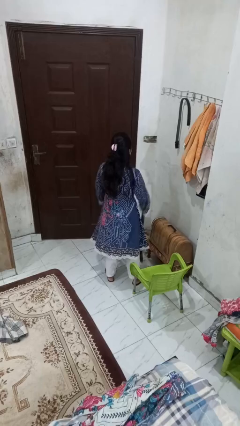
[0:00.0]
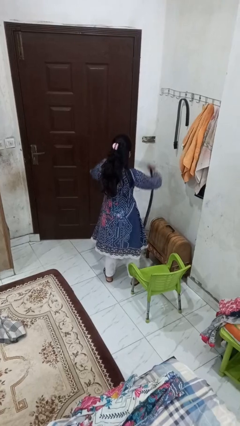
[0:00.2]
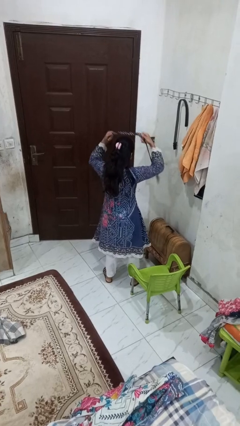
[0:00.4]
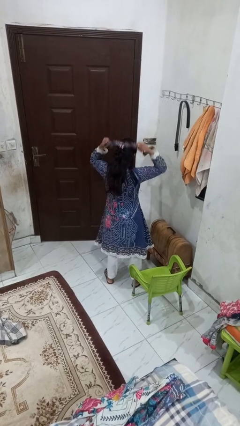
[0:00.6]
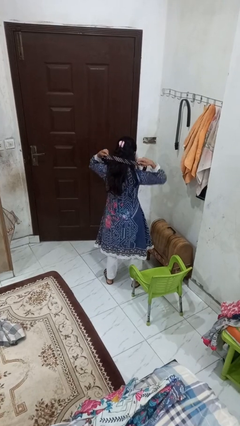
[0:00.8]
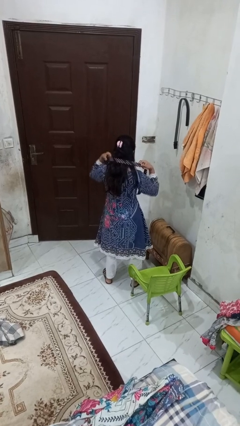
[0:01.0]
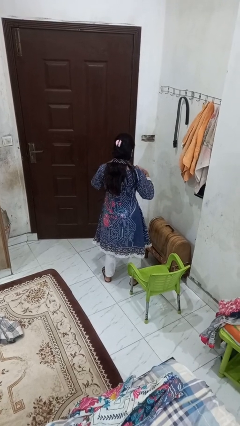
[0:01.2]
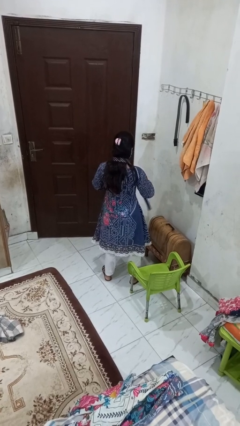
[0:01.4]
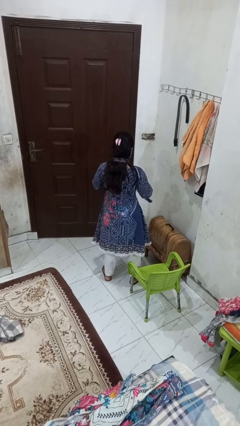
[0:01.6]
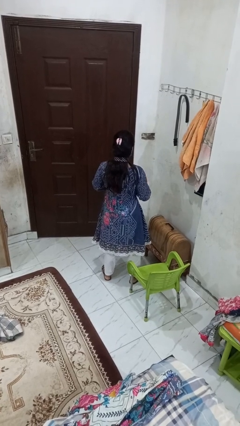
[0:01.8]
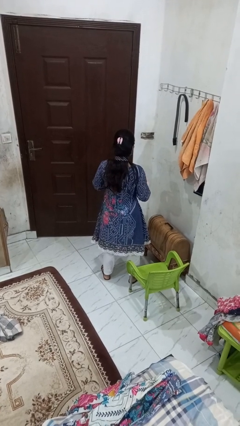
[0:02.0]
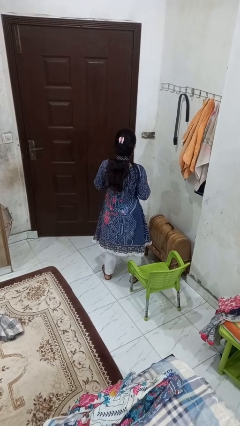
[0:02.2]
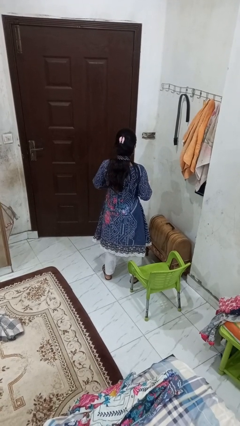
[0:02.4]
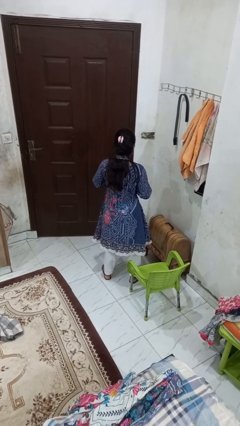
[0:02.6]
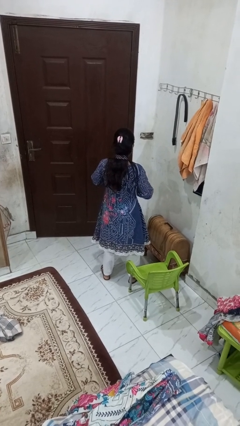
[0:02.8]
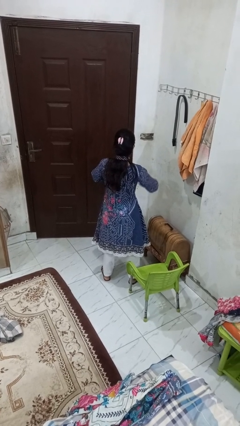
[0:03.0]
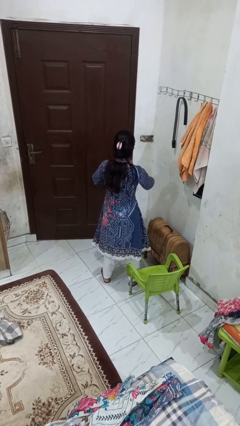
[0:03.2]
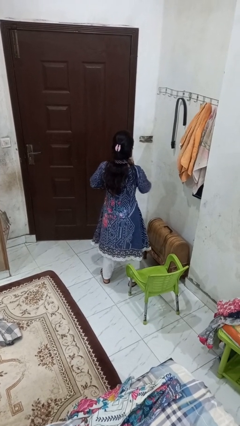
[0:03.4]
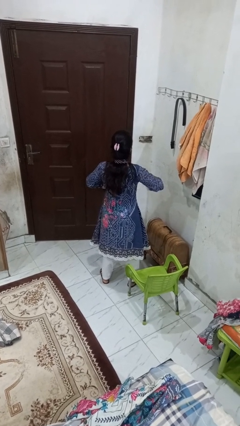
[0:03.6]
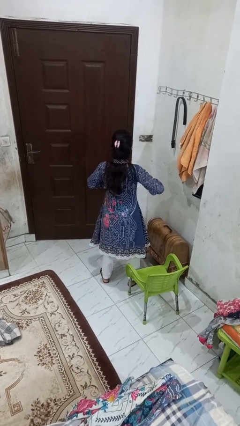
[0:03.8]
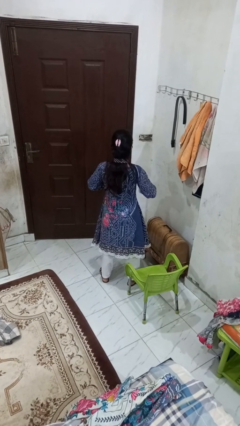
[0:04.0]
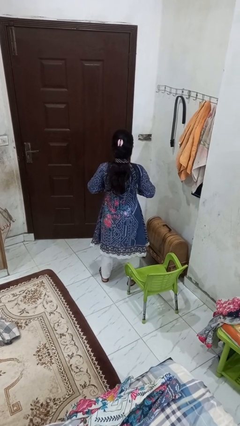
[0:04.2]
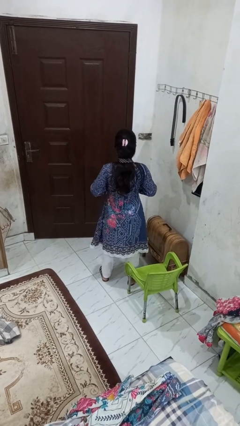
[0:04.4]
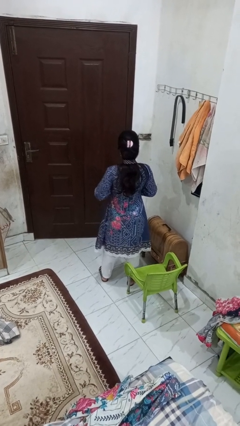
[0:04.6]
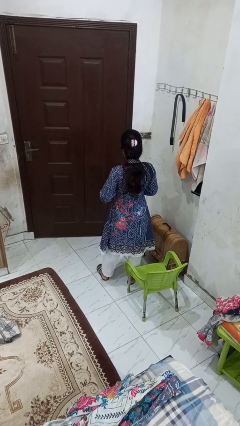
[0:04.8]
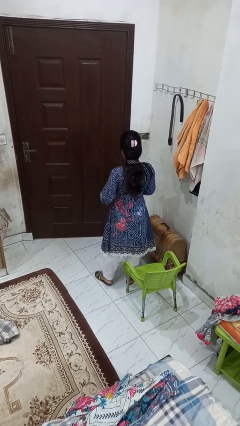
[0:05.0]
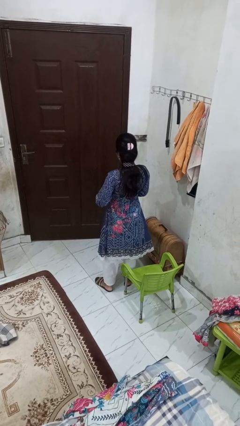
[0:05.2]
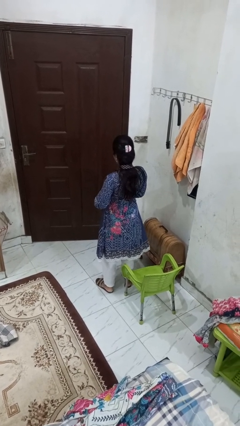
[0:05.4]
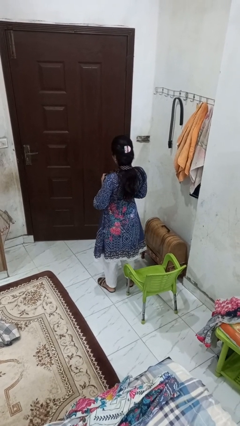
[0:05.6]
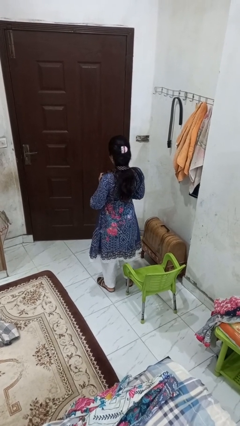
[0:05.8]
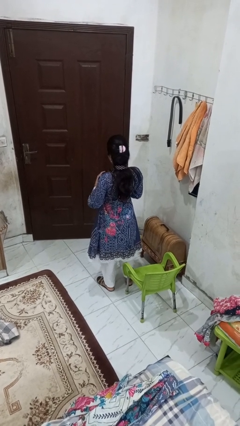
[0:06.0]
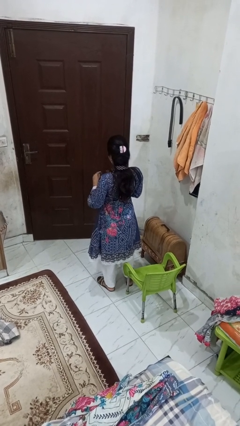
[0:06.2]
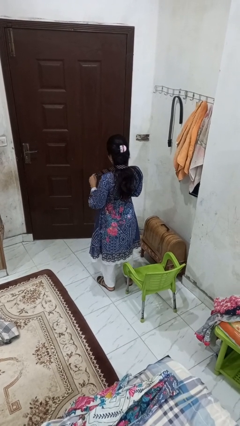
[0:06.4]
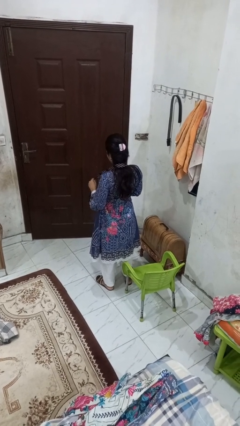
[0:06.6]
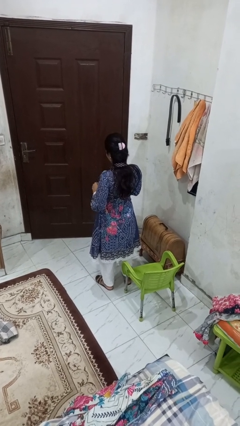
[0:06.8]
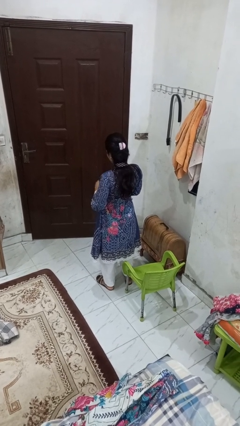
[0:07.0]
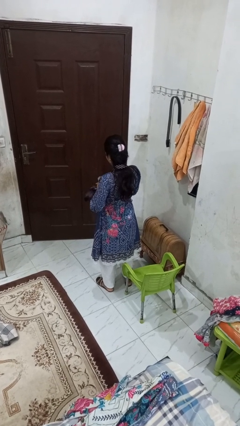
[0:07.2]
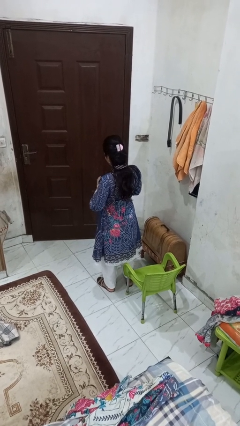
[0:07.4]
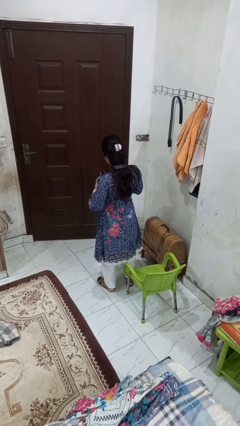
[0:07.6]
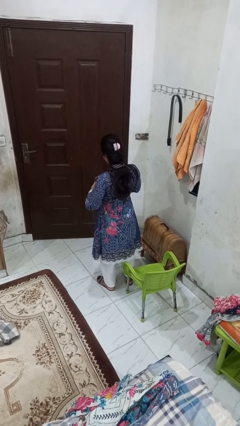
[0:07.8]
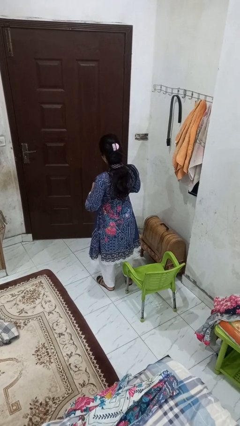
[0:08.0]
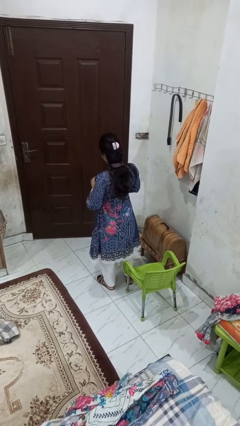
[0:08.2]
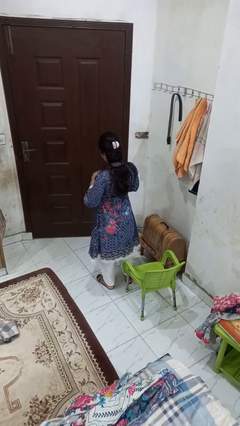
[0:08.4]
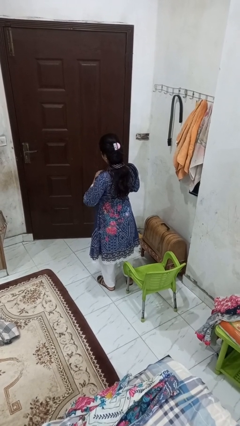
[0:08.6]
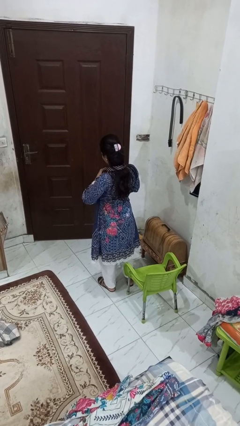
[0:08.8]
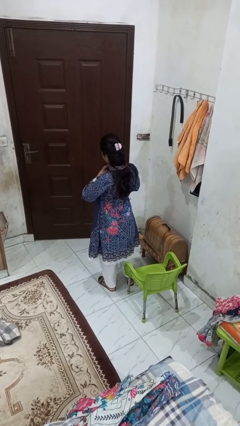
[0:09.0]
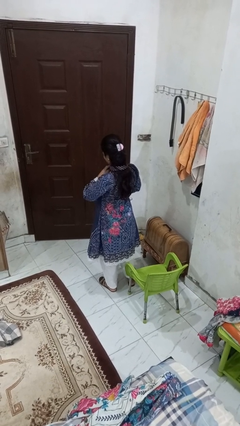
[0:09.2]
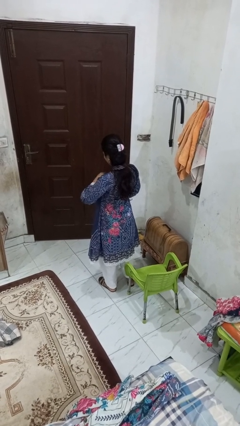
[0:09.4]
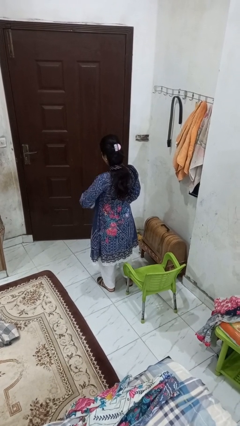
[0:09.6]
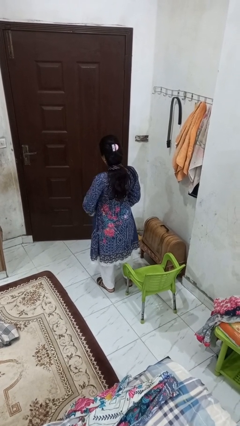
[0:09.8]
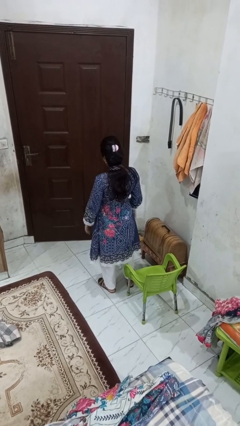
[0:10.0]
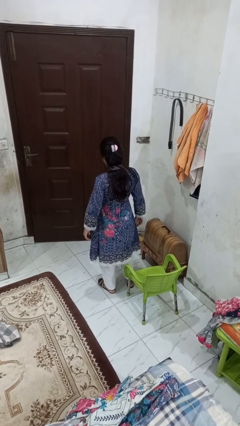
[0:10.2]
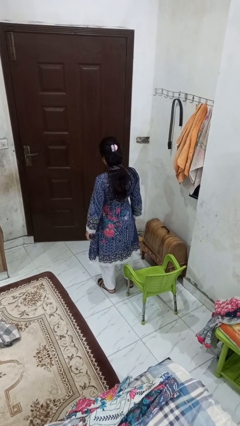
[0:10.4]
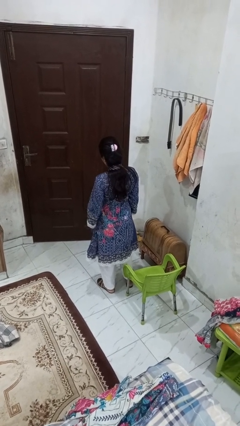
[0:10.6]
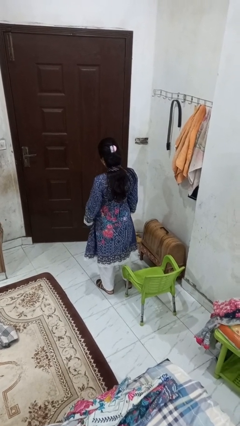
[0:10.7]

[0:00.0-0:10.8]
person puts on necktie

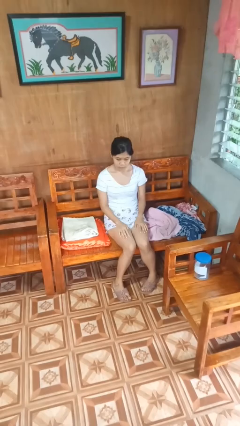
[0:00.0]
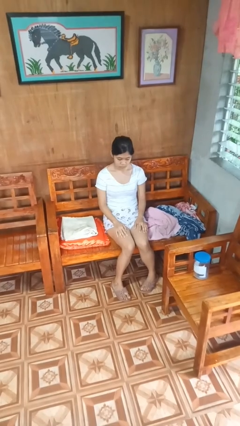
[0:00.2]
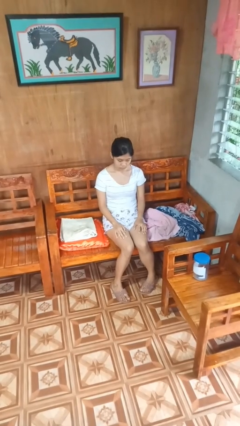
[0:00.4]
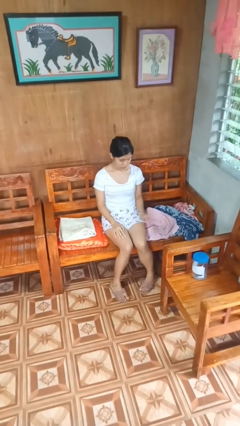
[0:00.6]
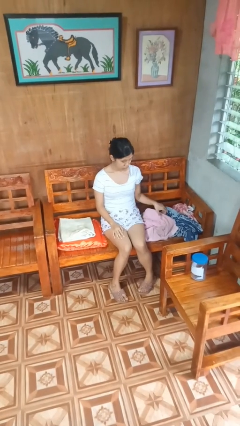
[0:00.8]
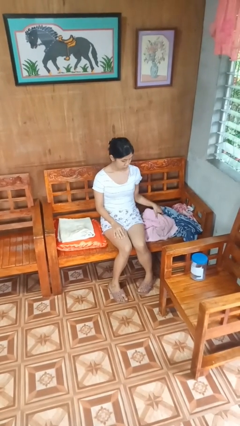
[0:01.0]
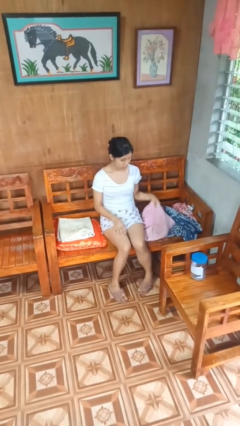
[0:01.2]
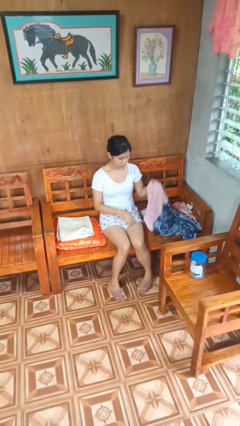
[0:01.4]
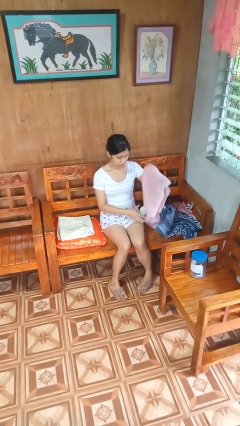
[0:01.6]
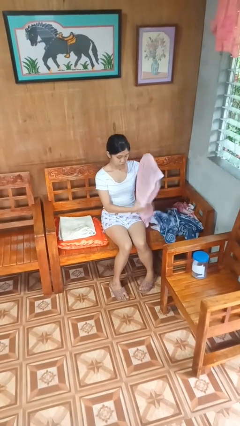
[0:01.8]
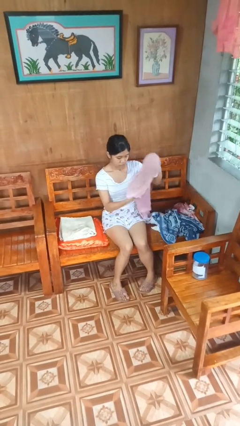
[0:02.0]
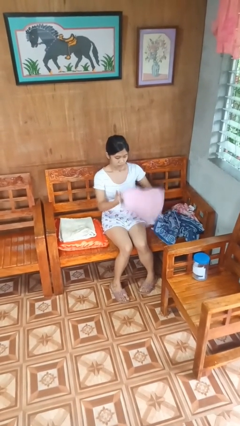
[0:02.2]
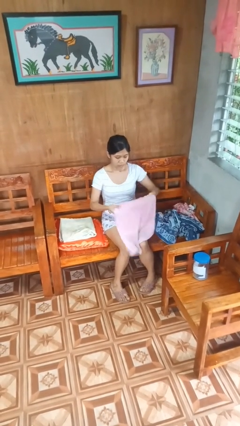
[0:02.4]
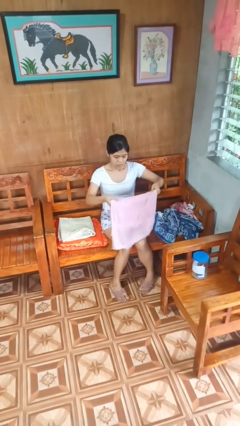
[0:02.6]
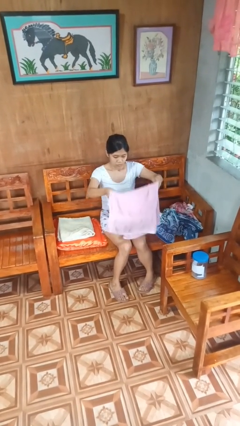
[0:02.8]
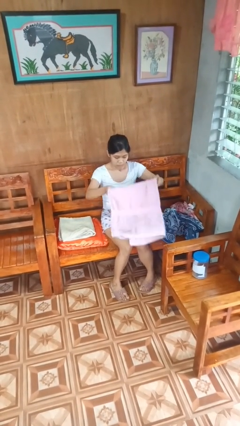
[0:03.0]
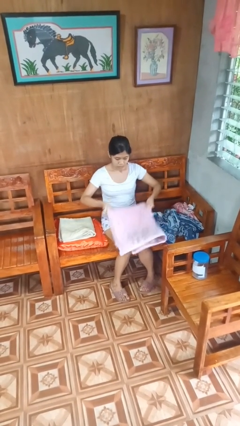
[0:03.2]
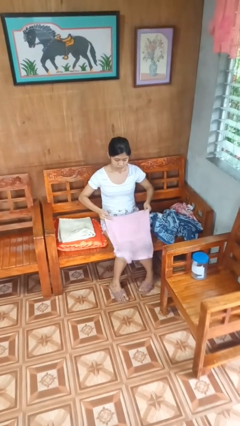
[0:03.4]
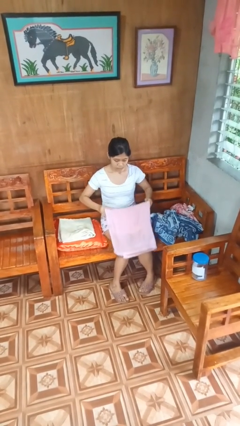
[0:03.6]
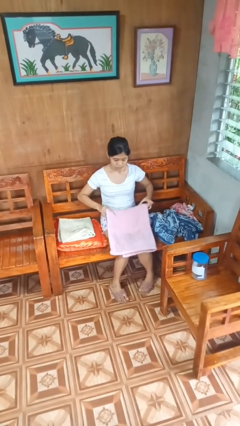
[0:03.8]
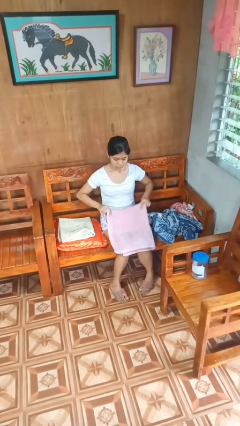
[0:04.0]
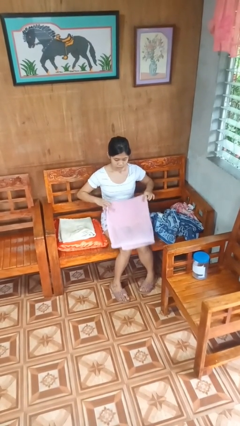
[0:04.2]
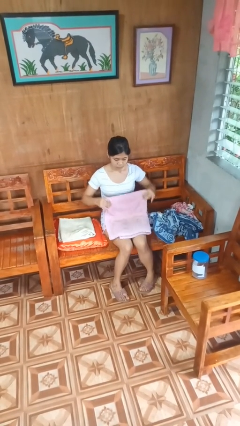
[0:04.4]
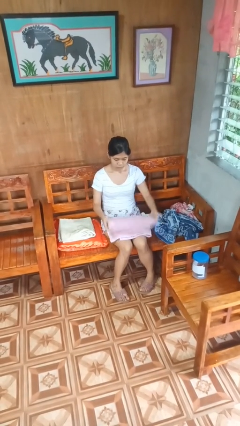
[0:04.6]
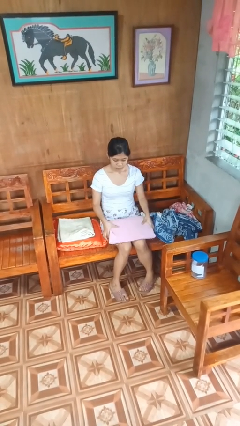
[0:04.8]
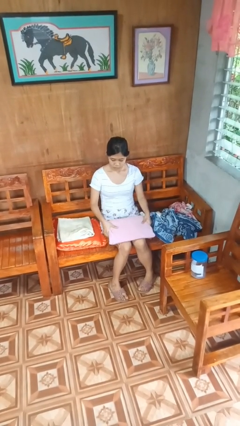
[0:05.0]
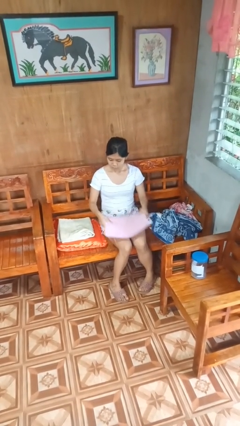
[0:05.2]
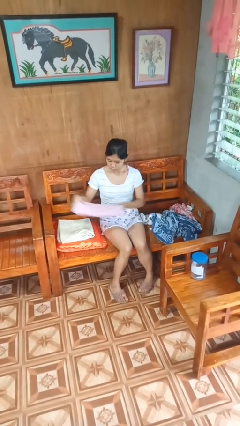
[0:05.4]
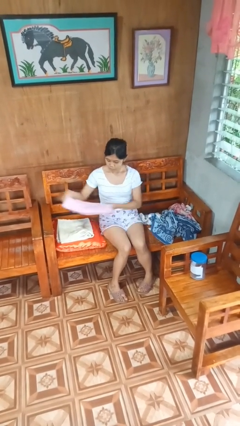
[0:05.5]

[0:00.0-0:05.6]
person folds towel

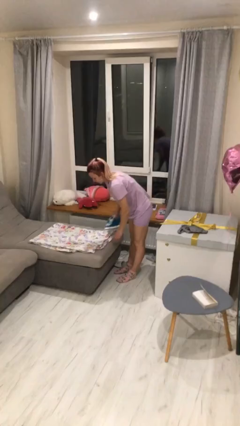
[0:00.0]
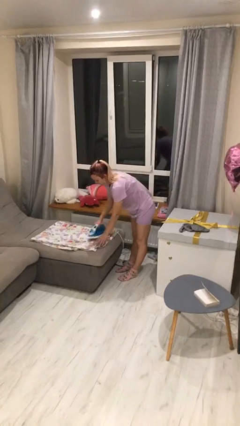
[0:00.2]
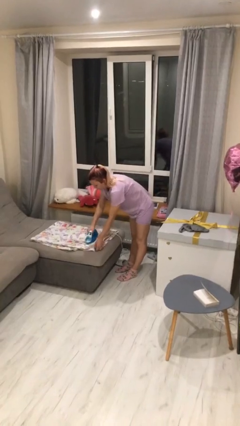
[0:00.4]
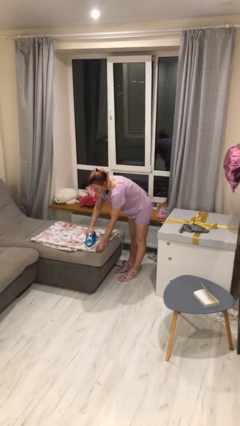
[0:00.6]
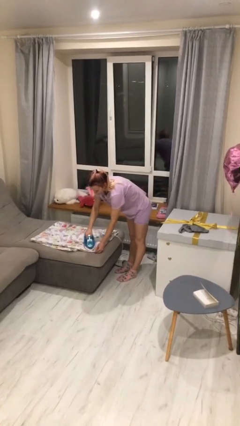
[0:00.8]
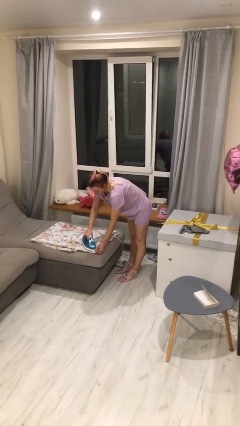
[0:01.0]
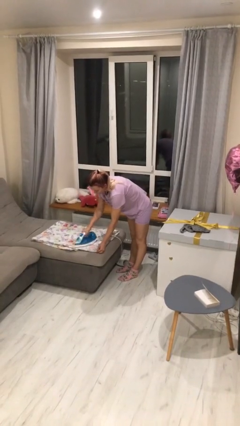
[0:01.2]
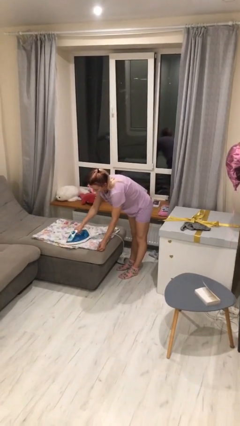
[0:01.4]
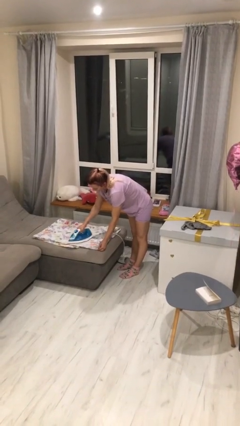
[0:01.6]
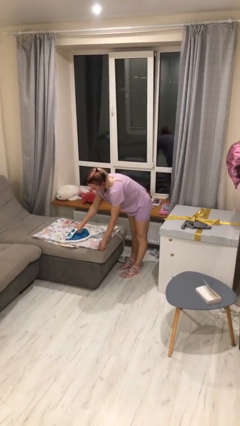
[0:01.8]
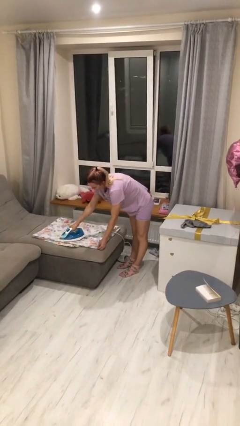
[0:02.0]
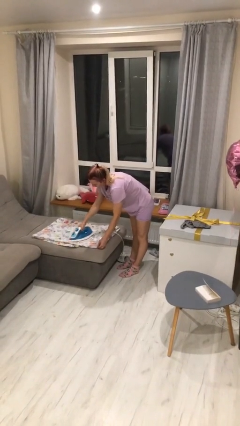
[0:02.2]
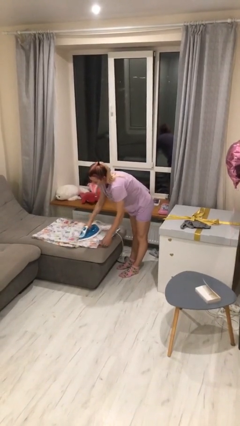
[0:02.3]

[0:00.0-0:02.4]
person irons clothes
